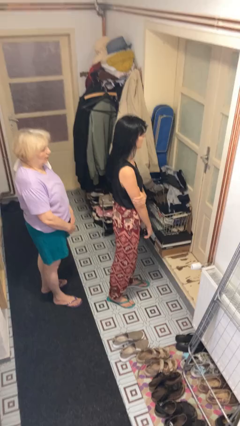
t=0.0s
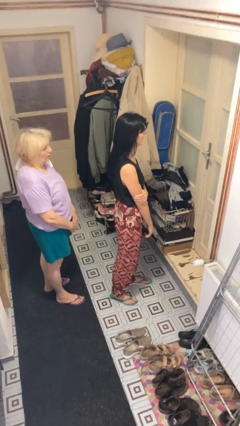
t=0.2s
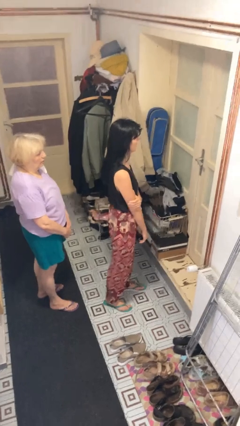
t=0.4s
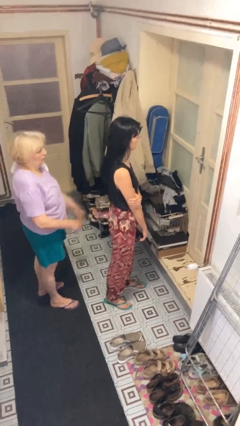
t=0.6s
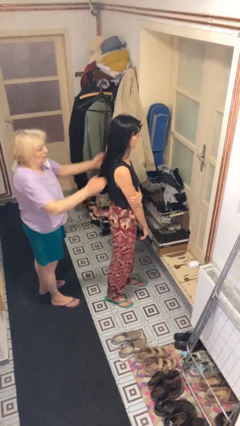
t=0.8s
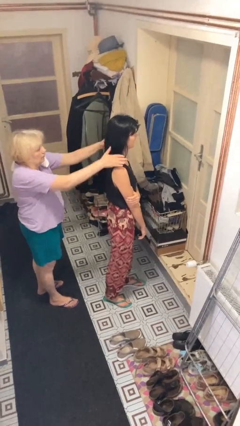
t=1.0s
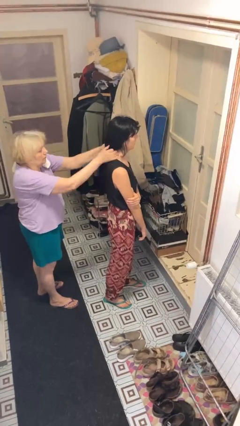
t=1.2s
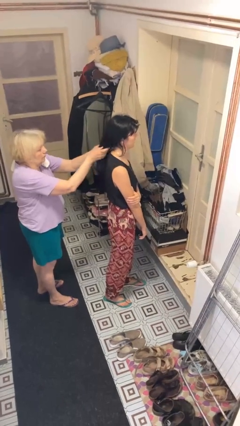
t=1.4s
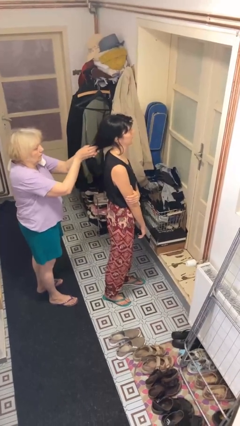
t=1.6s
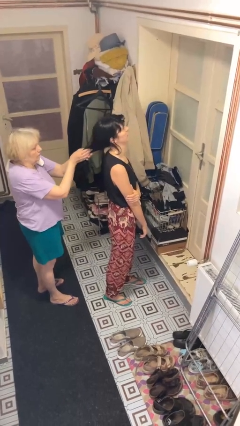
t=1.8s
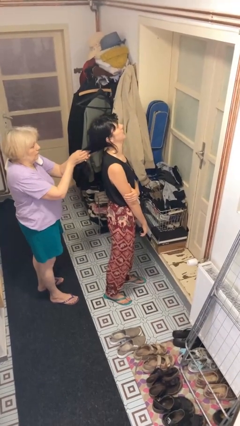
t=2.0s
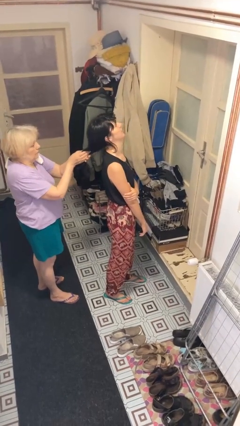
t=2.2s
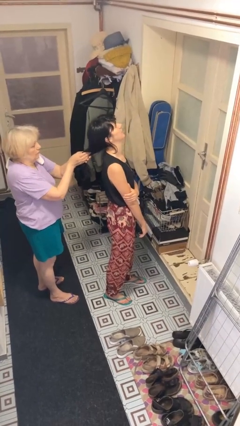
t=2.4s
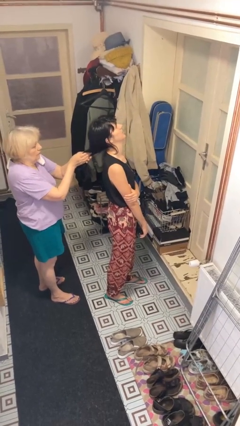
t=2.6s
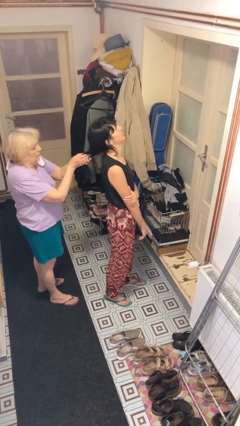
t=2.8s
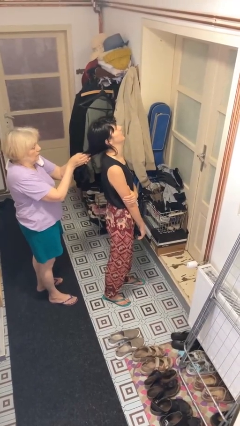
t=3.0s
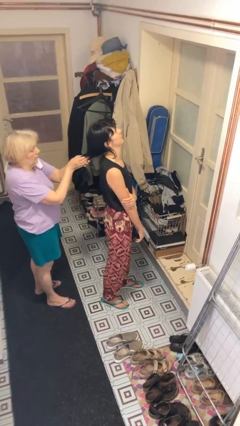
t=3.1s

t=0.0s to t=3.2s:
person grabs person by hair

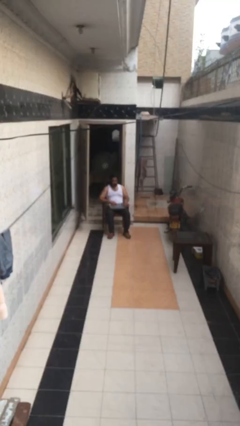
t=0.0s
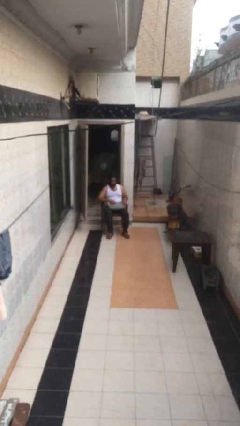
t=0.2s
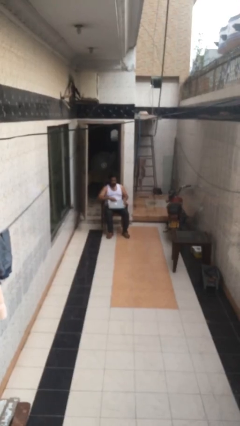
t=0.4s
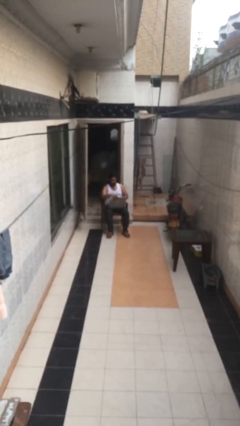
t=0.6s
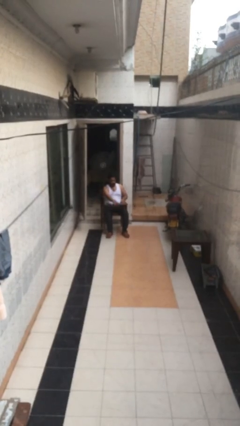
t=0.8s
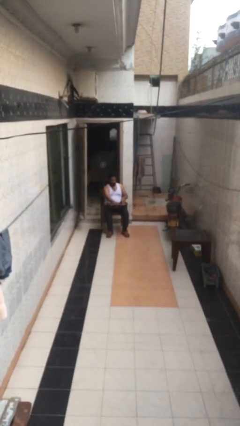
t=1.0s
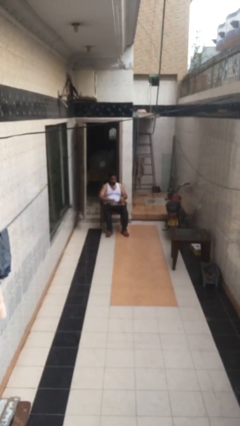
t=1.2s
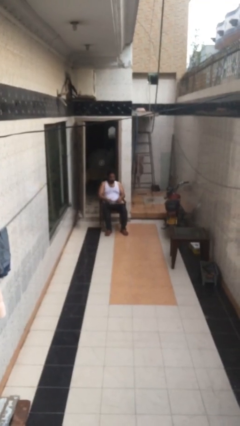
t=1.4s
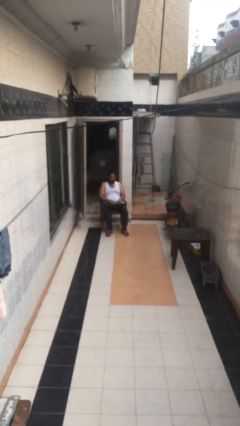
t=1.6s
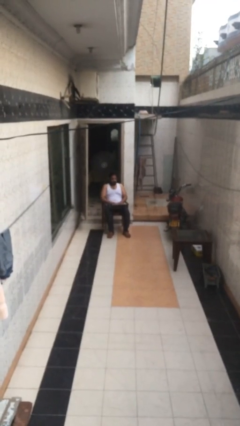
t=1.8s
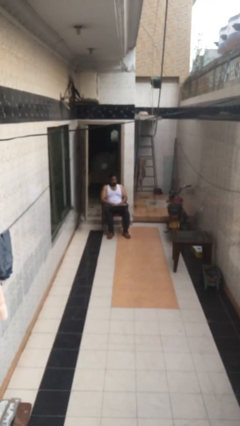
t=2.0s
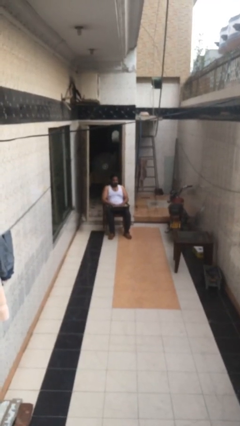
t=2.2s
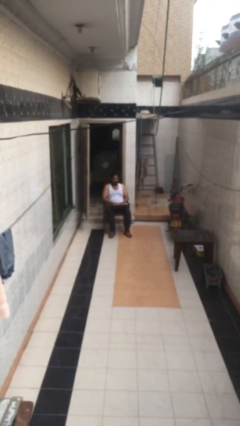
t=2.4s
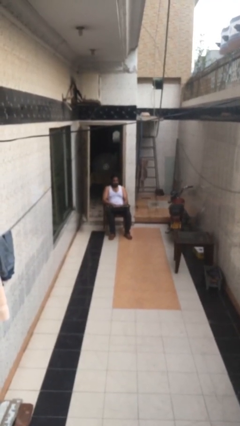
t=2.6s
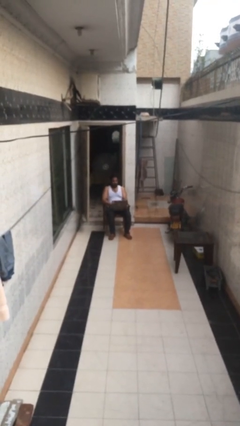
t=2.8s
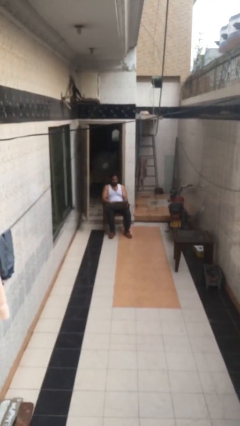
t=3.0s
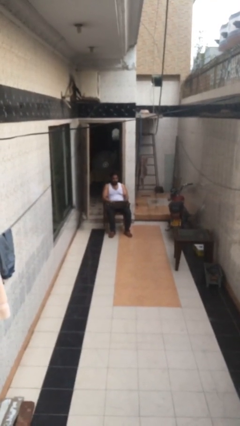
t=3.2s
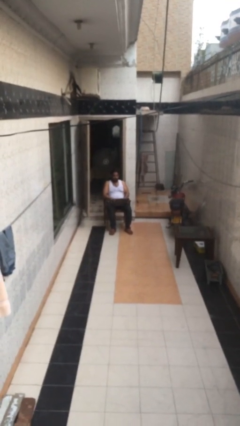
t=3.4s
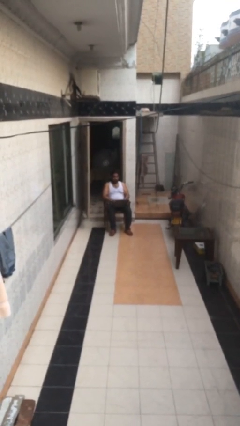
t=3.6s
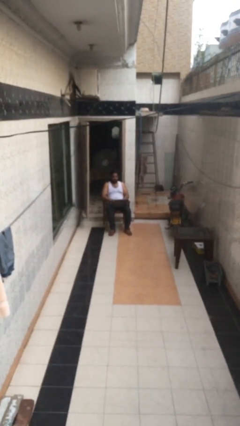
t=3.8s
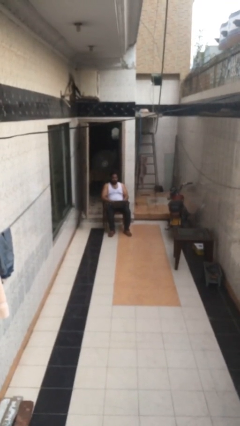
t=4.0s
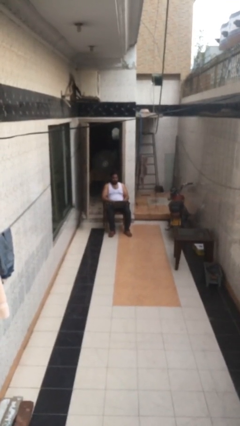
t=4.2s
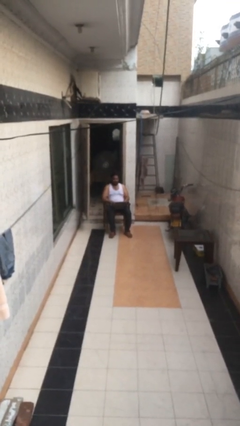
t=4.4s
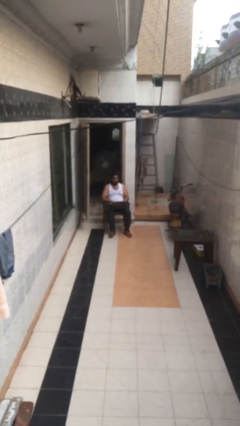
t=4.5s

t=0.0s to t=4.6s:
person interacts with laptop

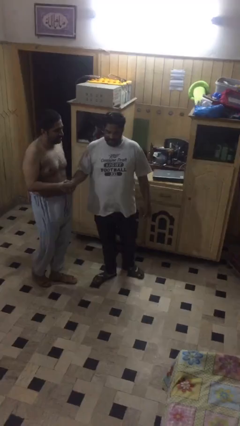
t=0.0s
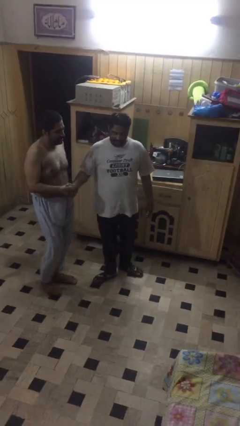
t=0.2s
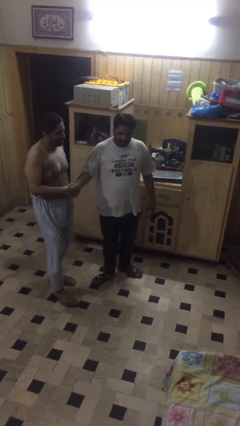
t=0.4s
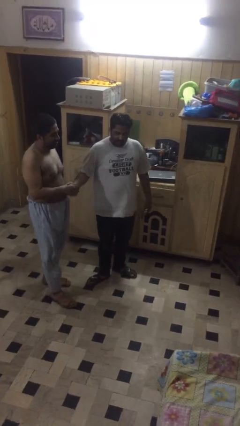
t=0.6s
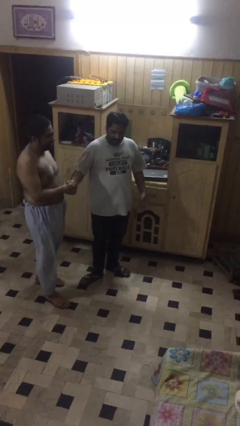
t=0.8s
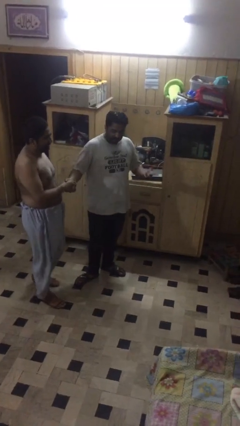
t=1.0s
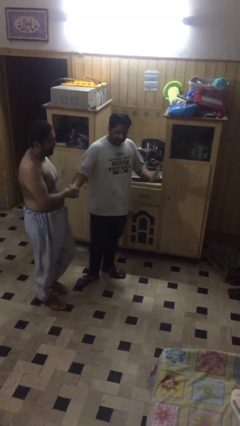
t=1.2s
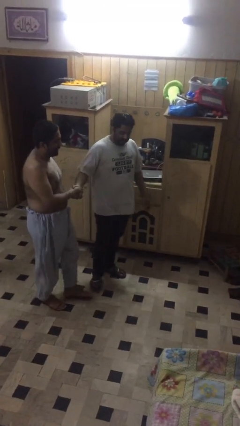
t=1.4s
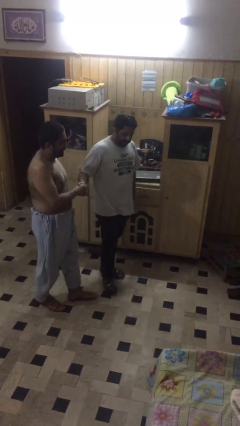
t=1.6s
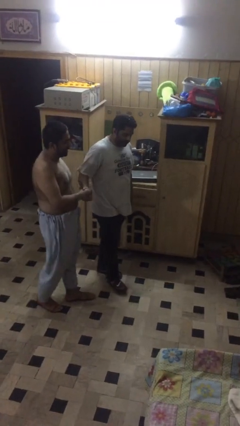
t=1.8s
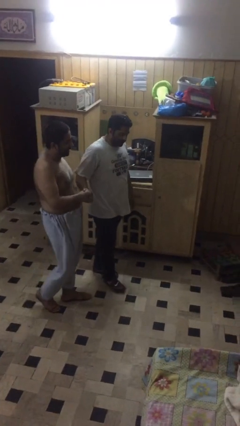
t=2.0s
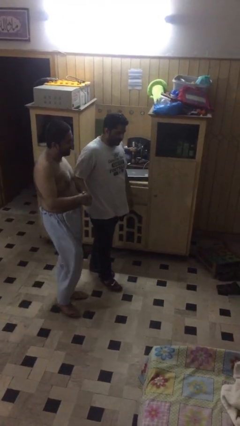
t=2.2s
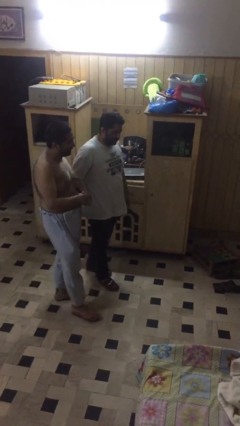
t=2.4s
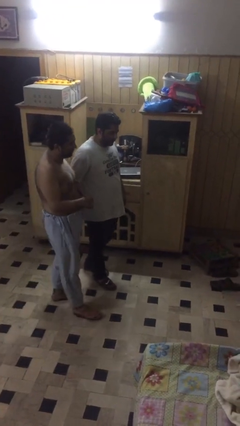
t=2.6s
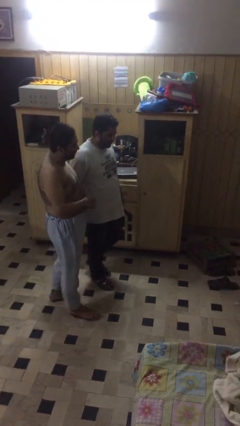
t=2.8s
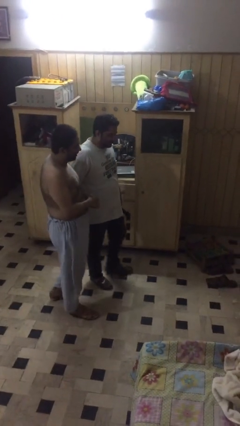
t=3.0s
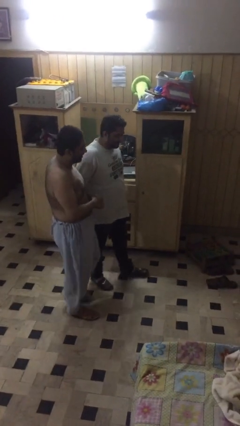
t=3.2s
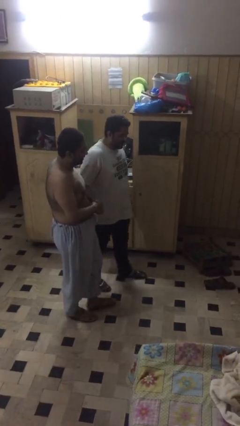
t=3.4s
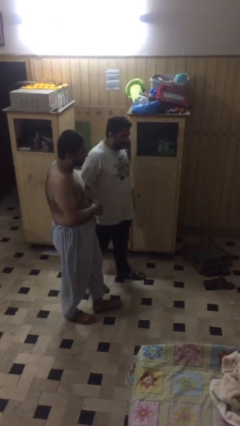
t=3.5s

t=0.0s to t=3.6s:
person talks to person

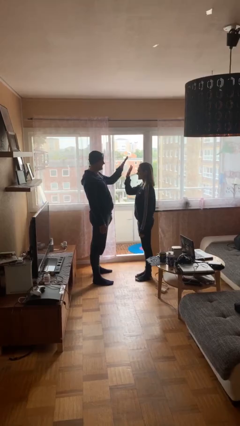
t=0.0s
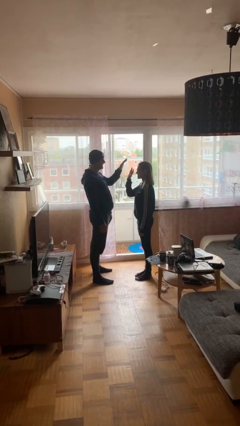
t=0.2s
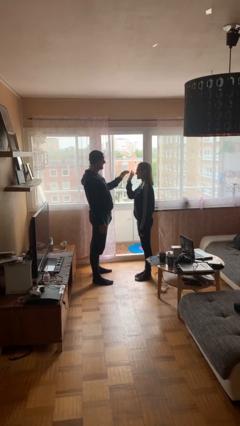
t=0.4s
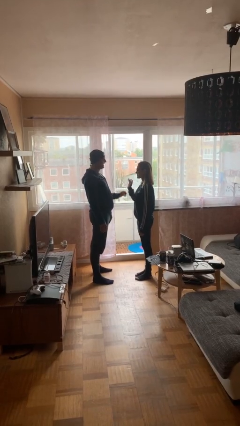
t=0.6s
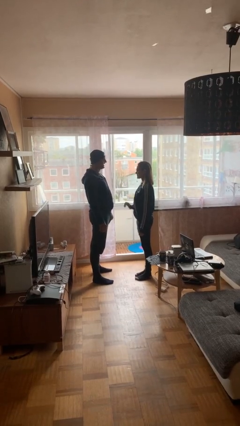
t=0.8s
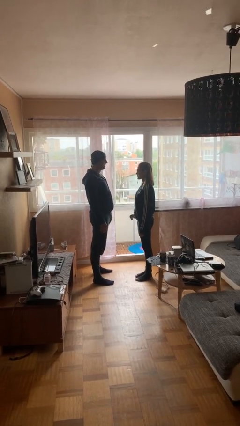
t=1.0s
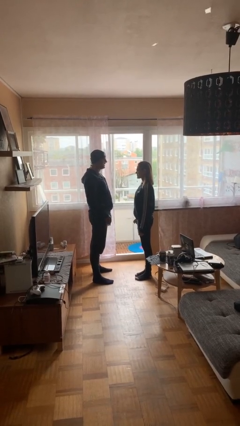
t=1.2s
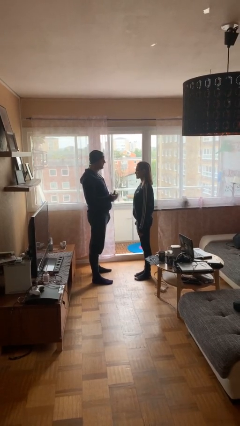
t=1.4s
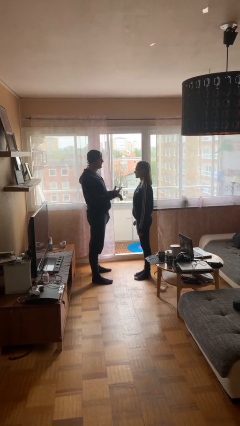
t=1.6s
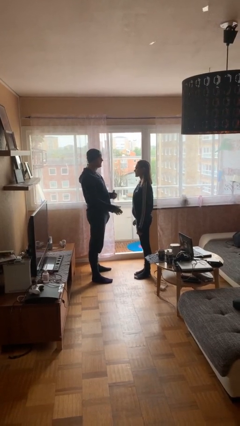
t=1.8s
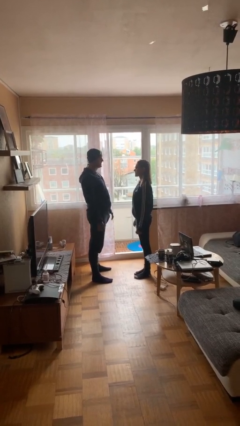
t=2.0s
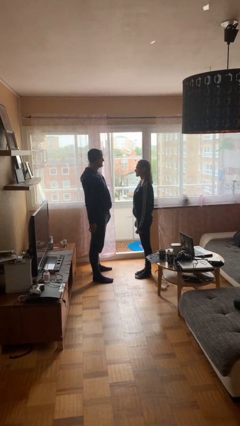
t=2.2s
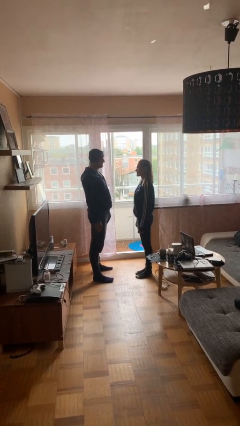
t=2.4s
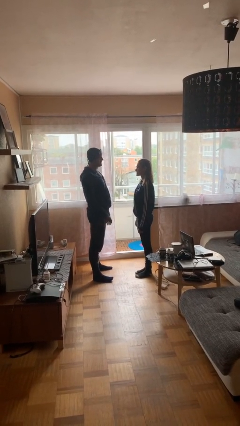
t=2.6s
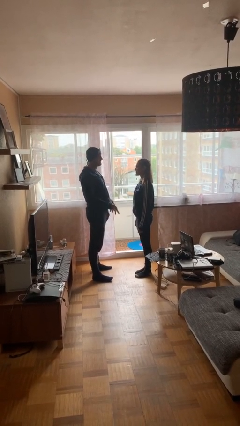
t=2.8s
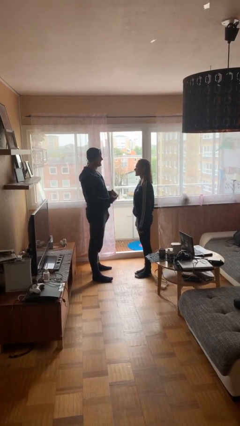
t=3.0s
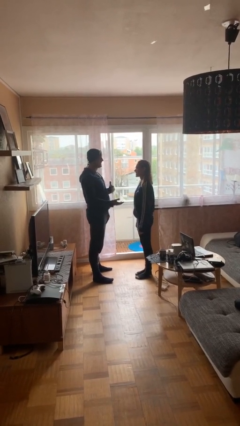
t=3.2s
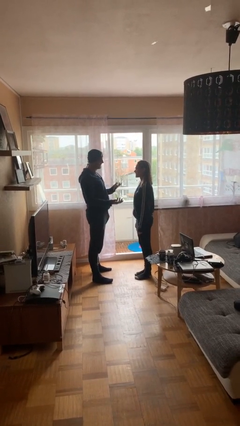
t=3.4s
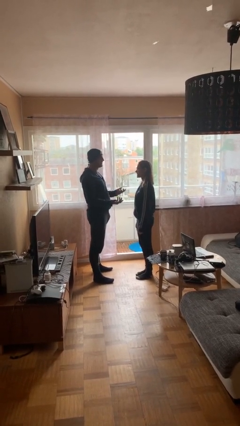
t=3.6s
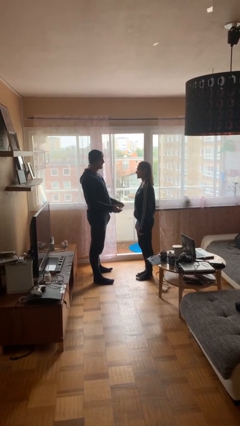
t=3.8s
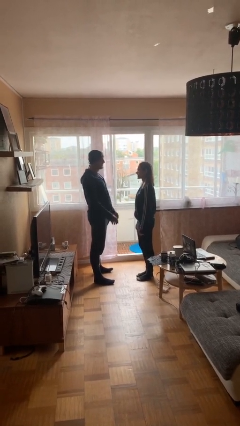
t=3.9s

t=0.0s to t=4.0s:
person highfives hand

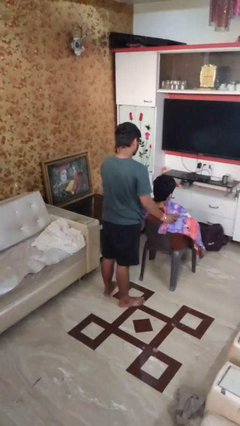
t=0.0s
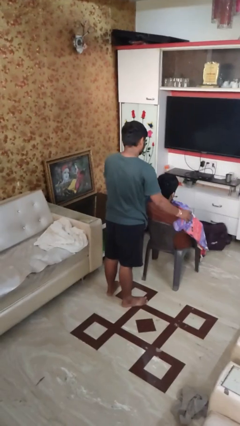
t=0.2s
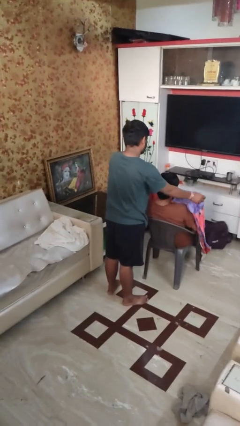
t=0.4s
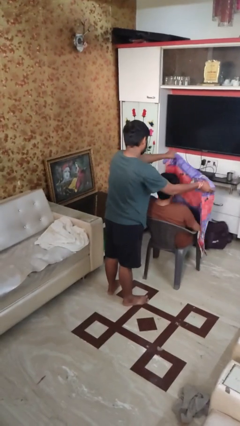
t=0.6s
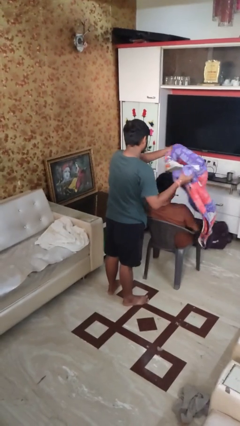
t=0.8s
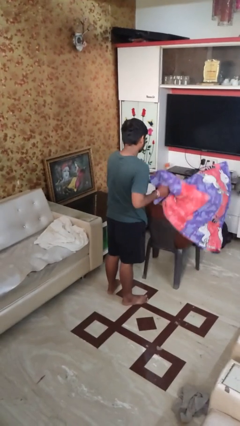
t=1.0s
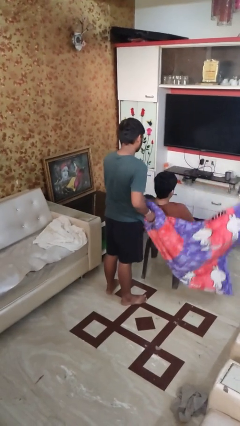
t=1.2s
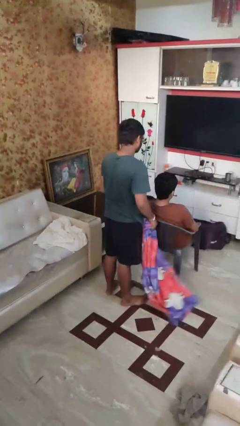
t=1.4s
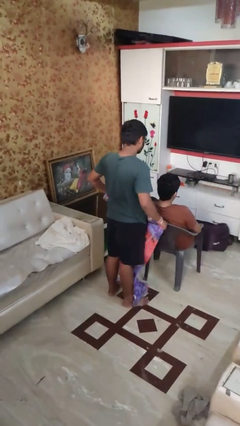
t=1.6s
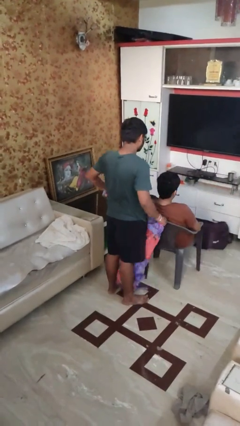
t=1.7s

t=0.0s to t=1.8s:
person uncovers friend with blanket
